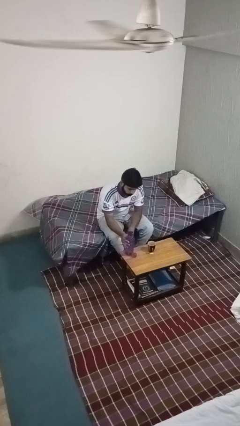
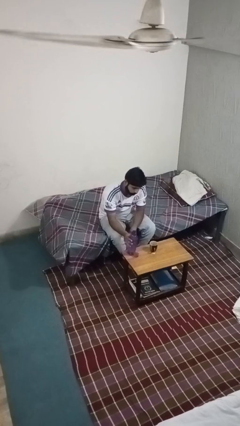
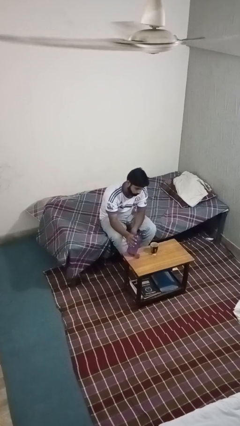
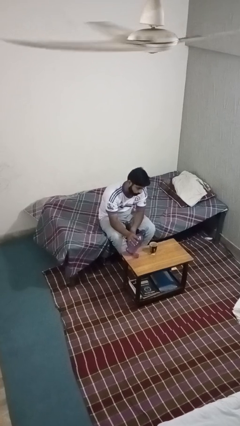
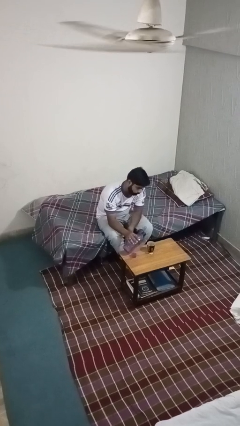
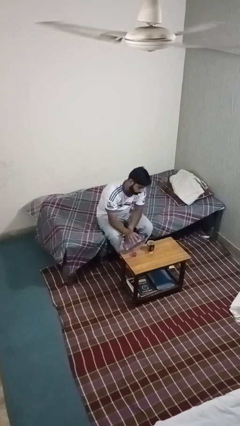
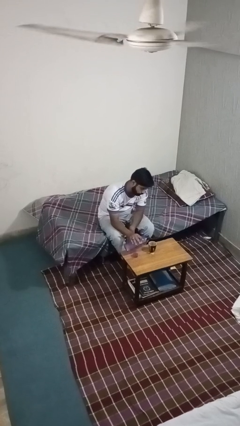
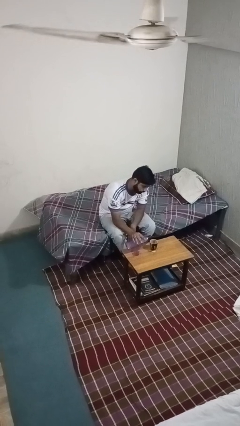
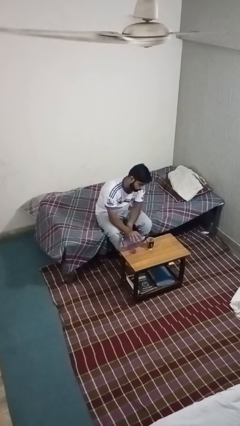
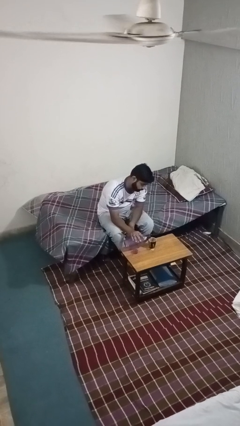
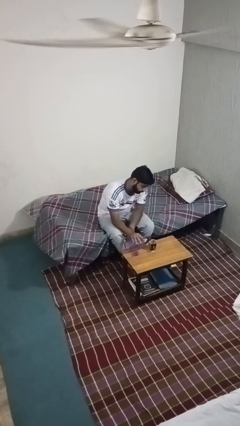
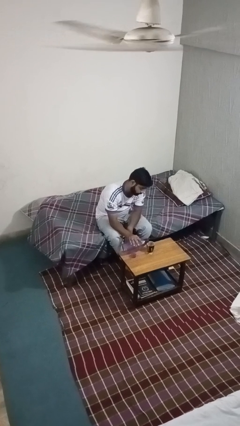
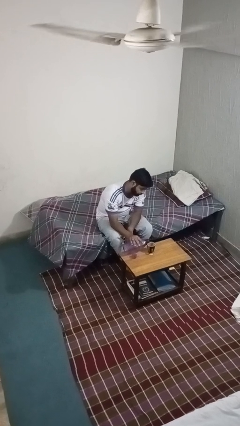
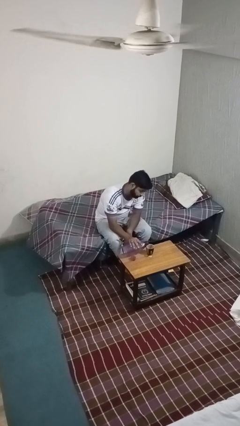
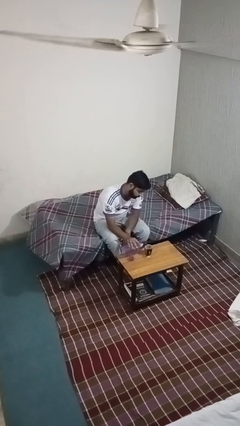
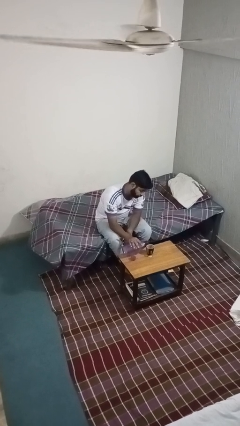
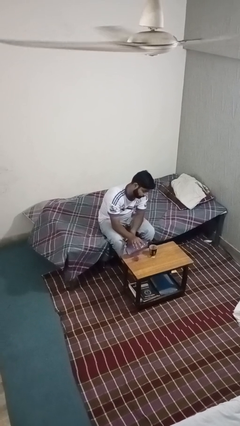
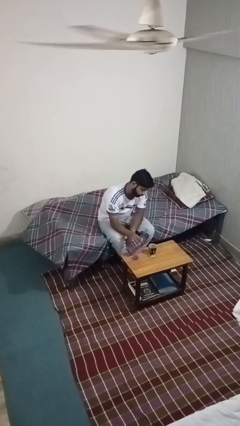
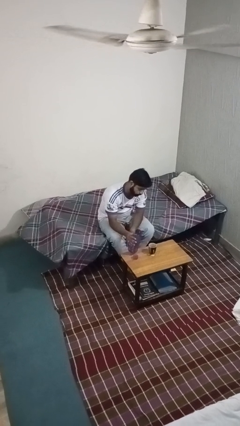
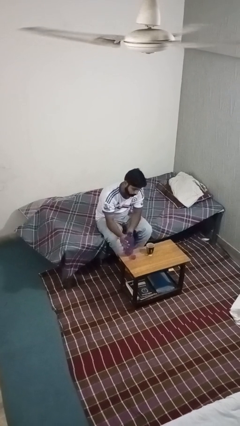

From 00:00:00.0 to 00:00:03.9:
person pours liquid into cup

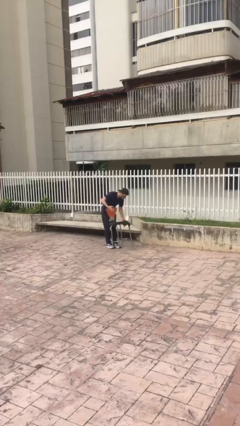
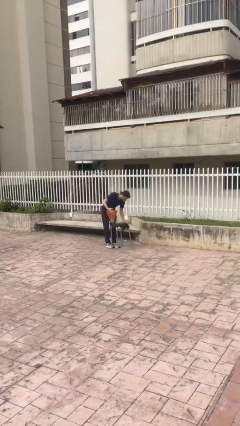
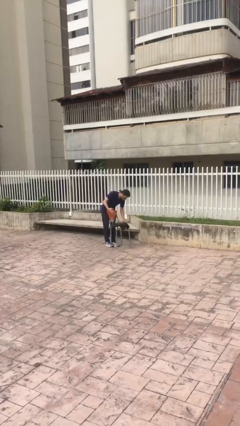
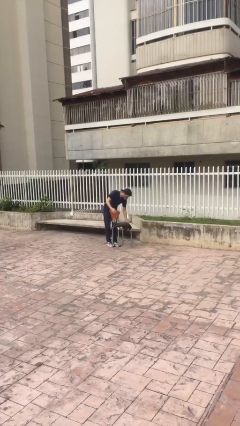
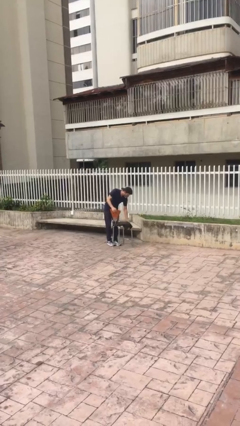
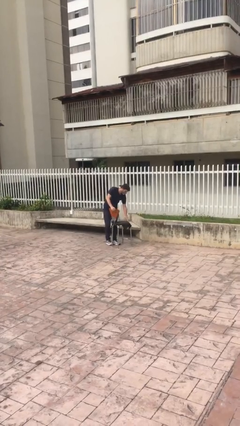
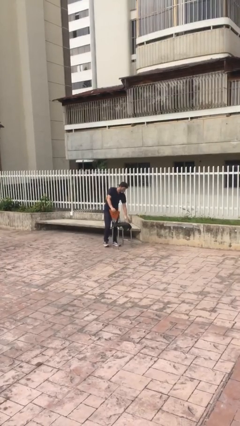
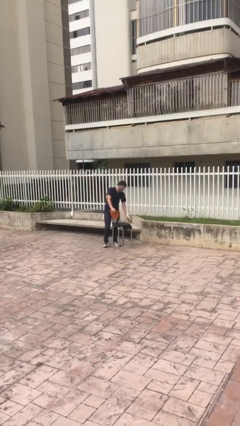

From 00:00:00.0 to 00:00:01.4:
person puts down object on floor

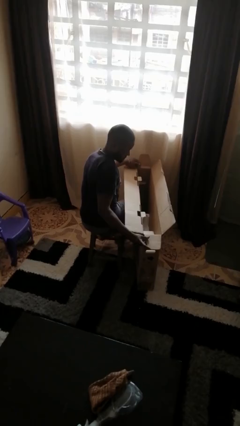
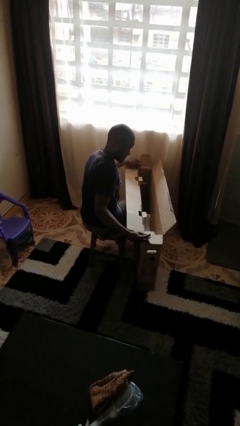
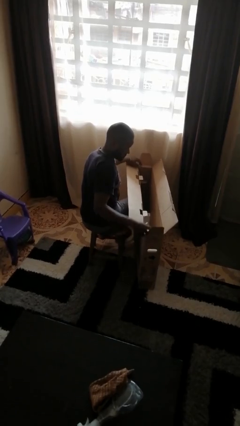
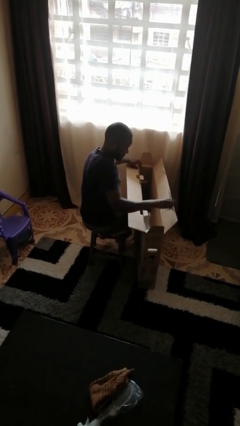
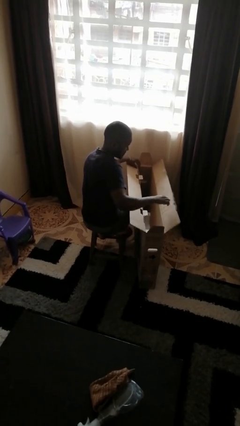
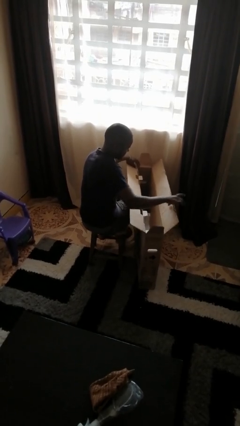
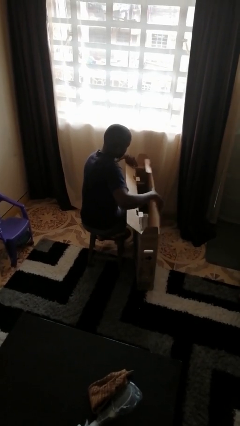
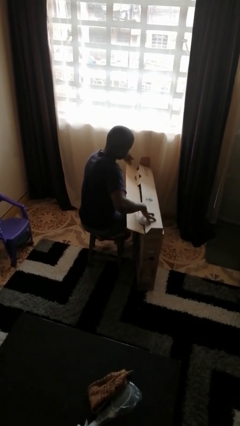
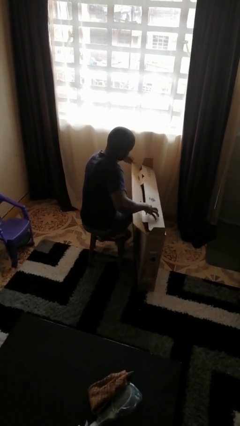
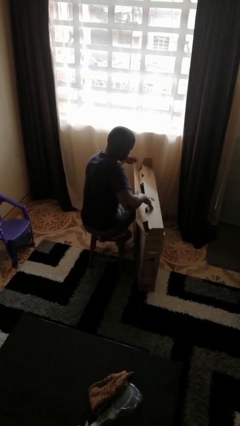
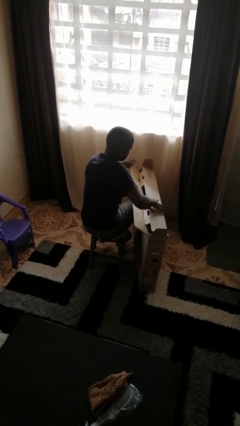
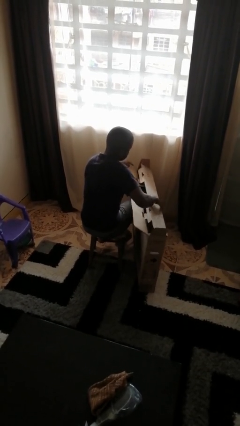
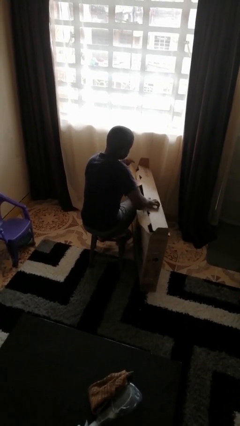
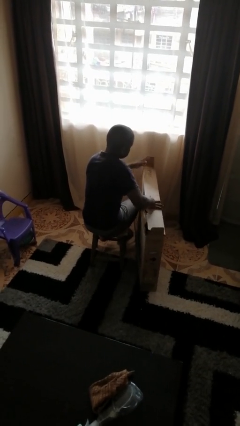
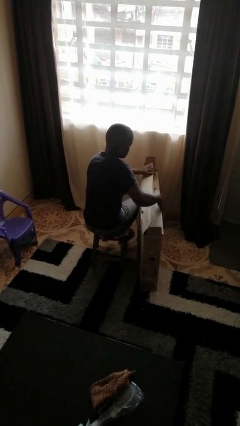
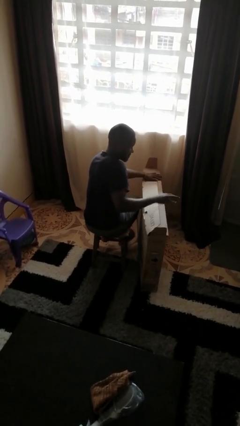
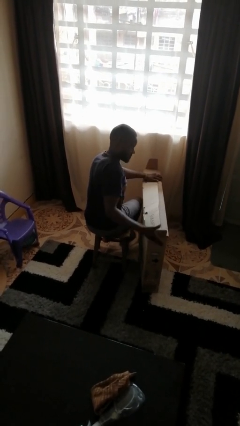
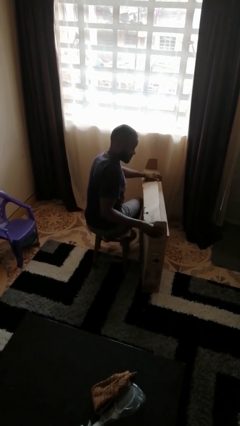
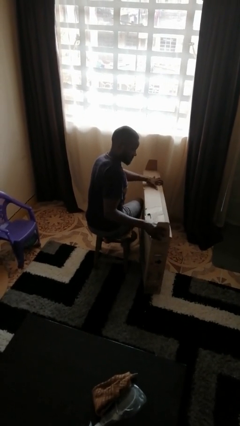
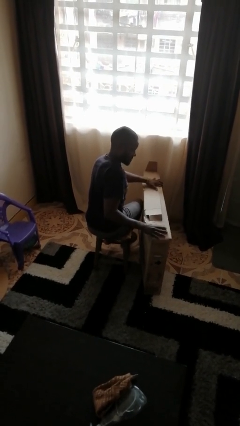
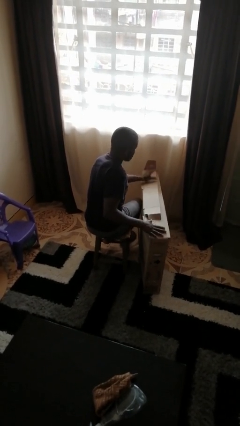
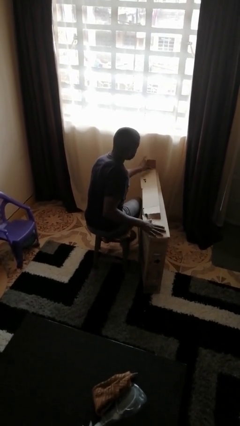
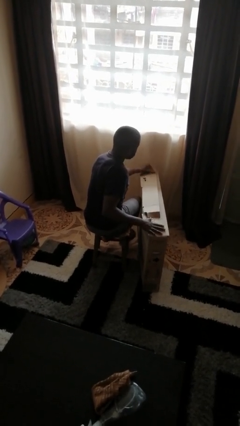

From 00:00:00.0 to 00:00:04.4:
person closes box

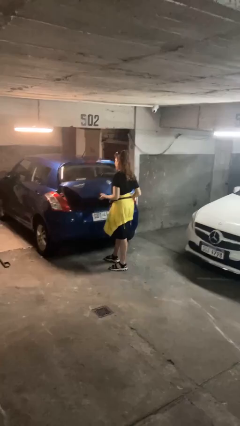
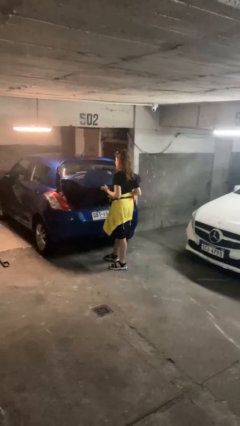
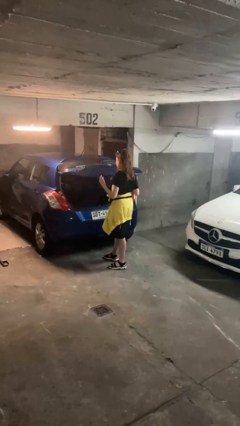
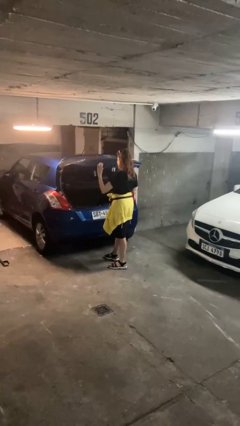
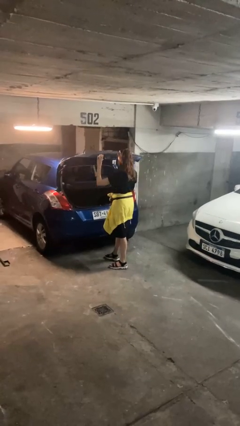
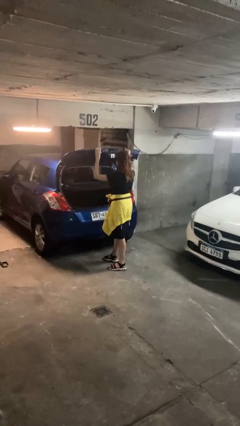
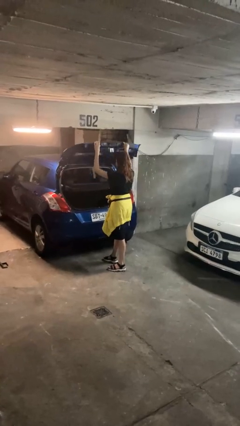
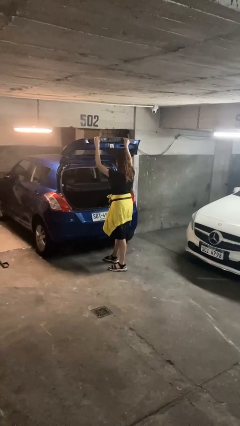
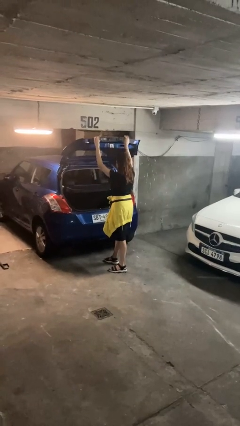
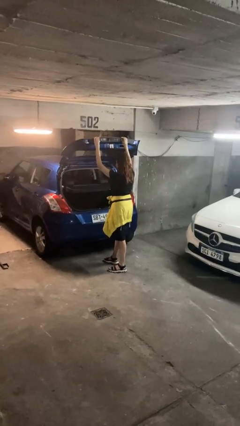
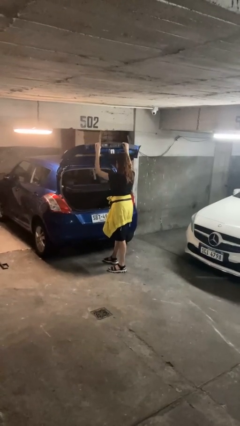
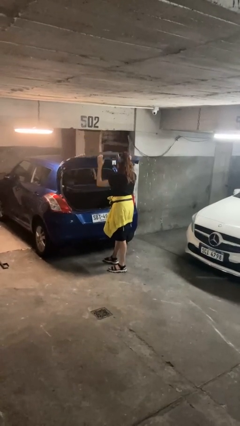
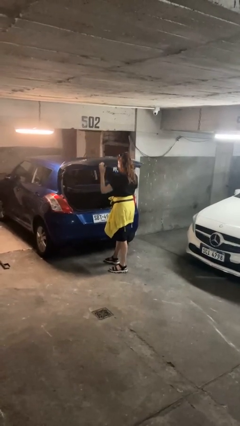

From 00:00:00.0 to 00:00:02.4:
person opens car trunk

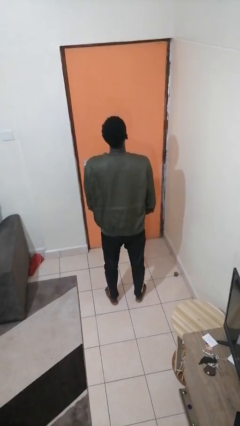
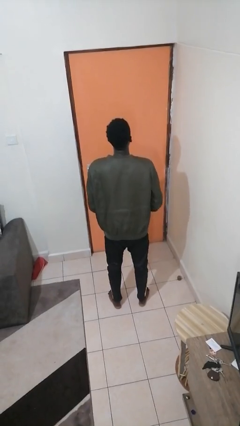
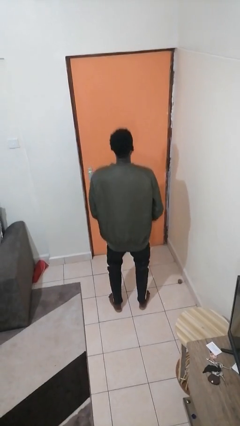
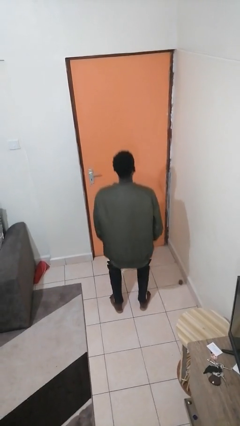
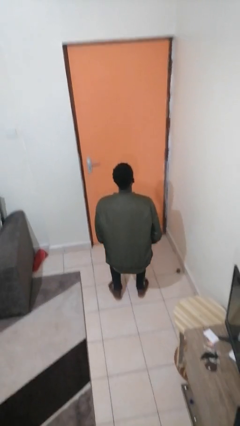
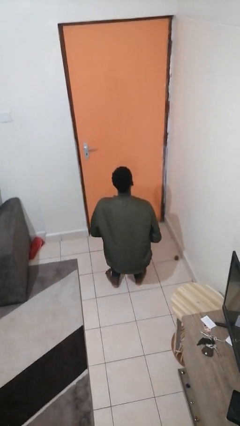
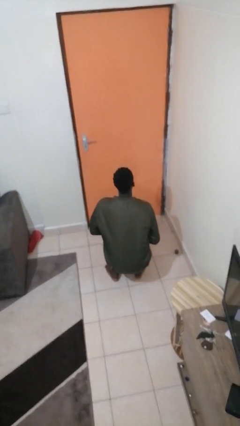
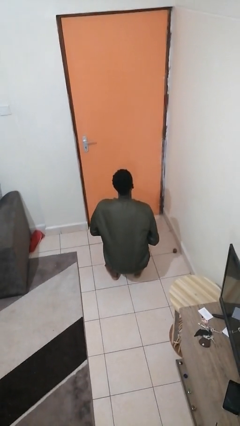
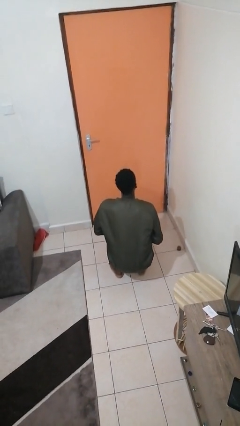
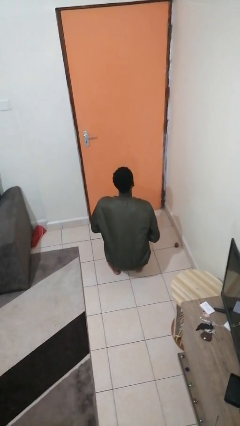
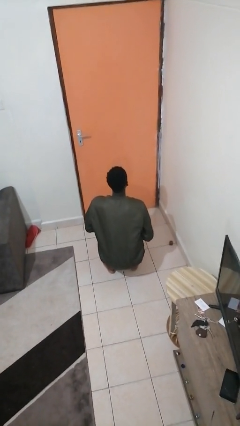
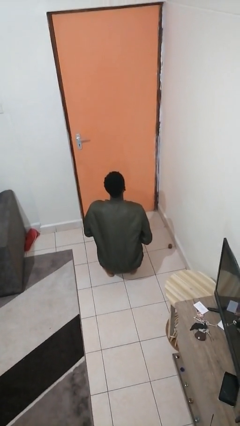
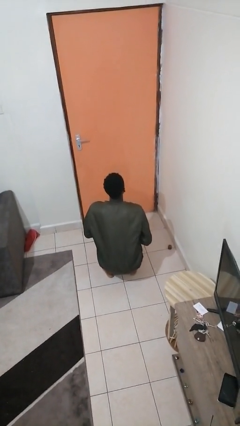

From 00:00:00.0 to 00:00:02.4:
person squats

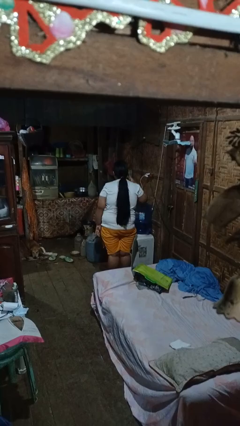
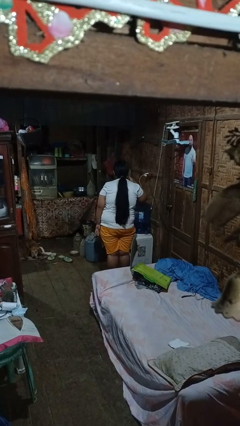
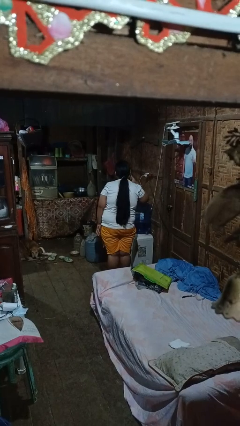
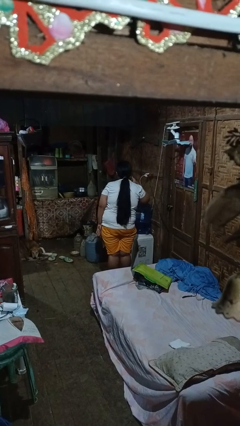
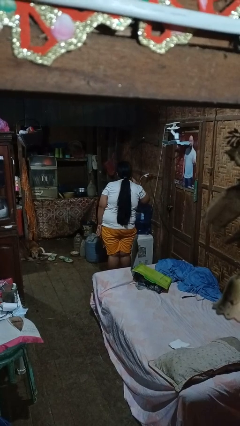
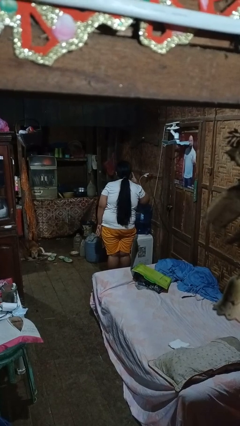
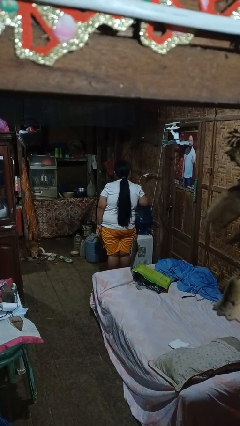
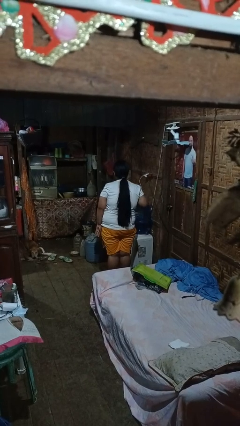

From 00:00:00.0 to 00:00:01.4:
person gestures listen closely

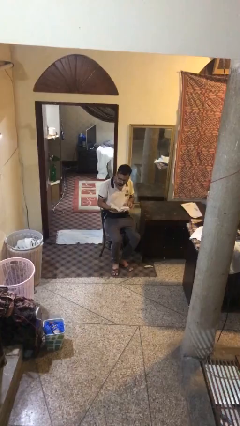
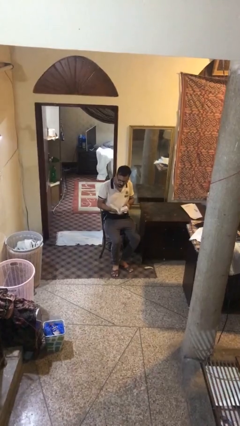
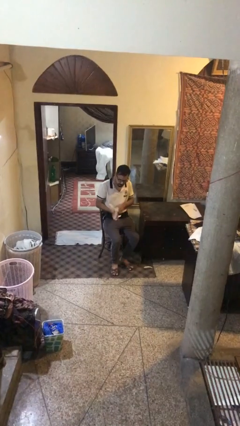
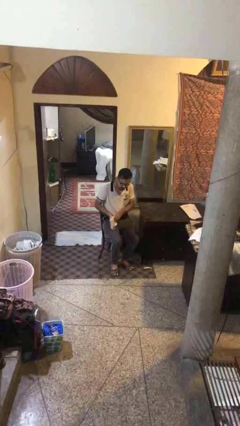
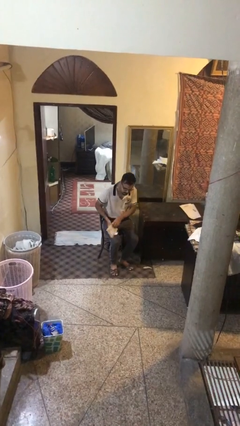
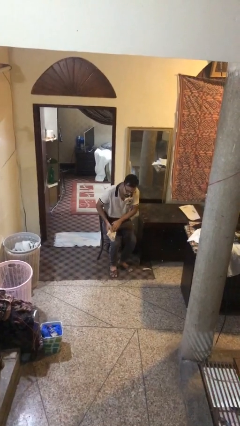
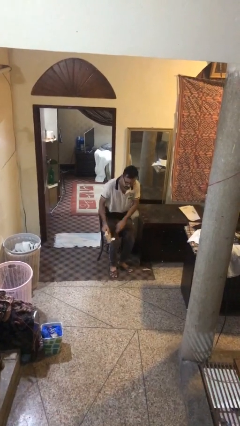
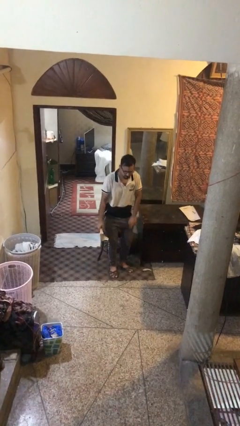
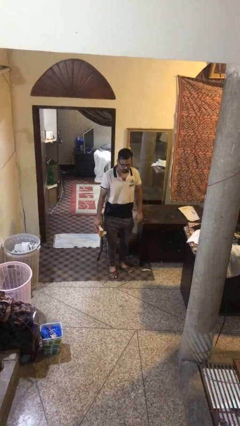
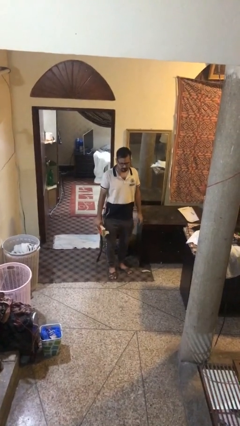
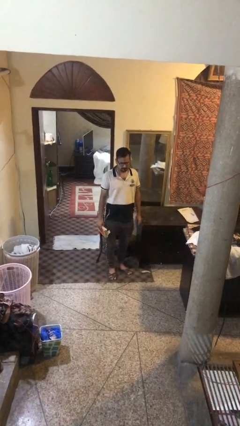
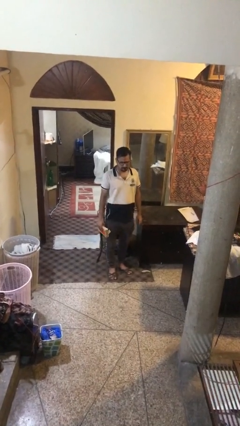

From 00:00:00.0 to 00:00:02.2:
person stands up
